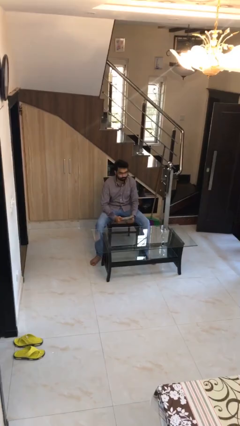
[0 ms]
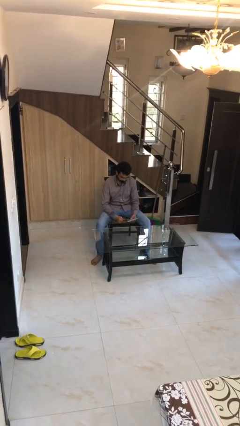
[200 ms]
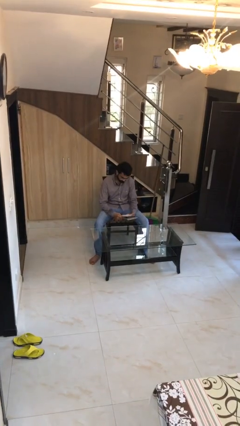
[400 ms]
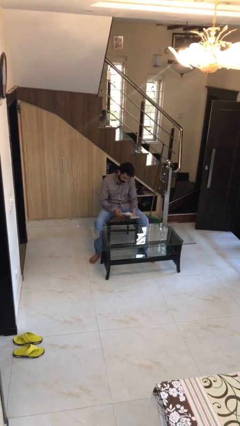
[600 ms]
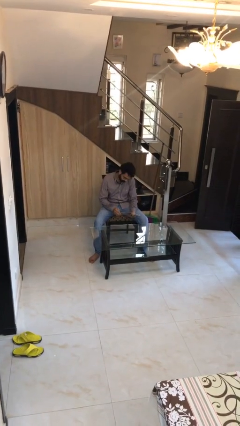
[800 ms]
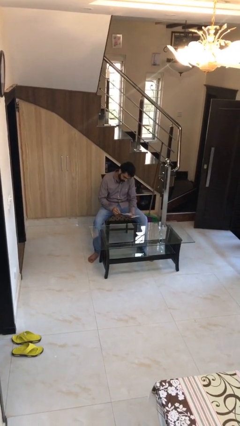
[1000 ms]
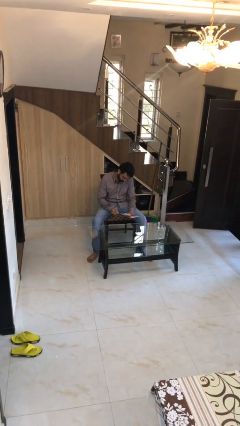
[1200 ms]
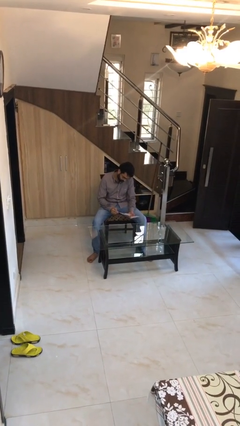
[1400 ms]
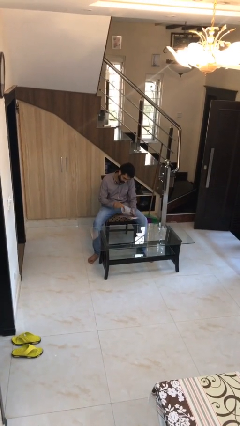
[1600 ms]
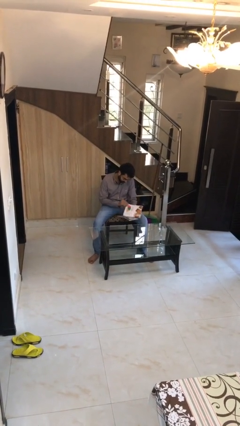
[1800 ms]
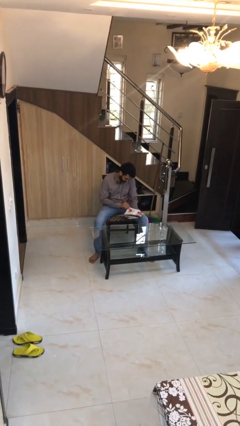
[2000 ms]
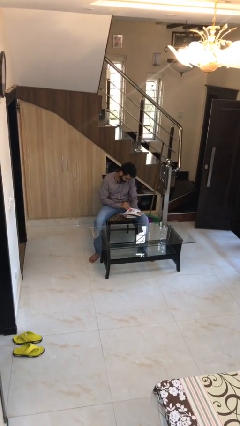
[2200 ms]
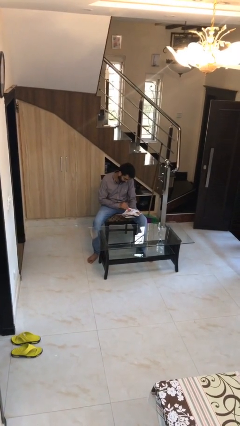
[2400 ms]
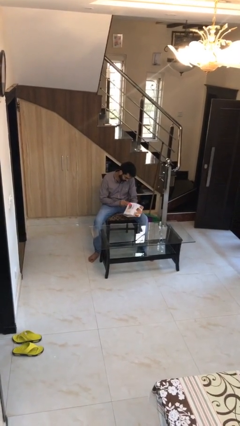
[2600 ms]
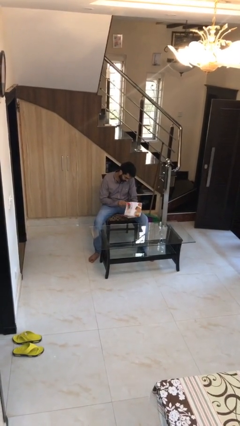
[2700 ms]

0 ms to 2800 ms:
person reads document

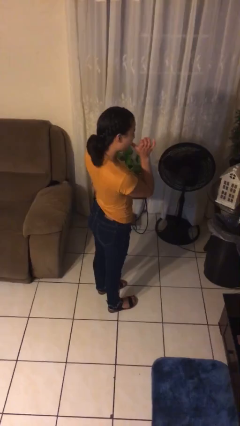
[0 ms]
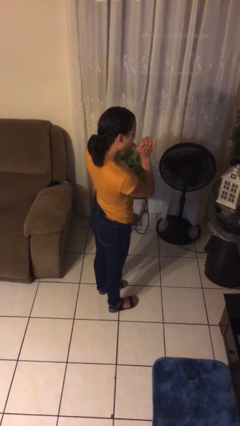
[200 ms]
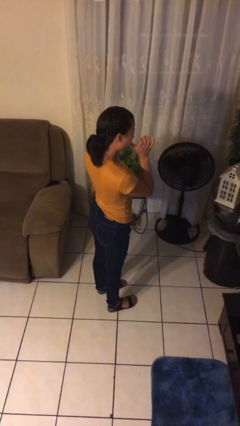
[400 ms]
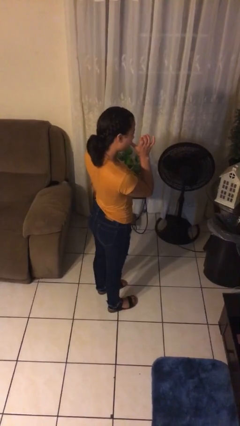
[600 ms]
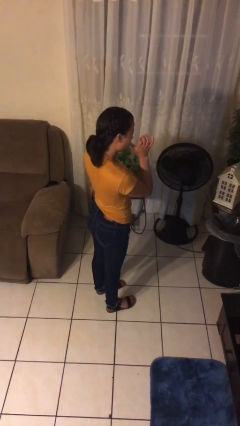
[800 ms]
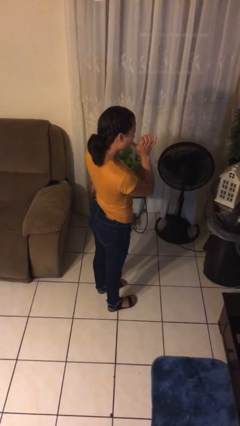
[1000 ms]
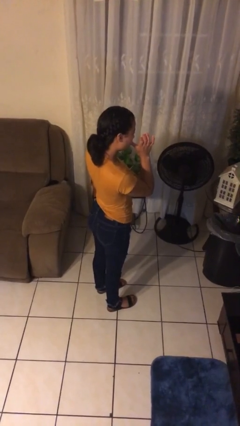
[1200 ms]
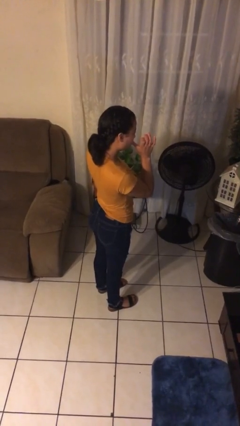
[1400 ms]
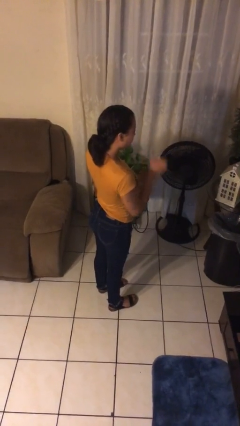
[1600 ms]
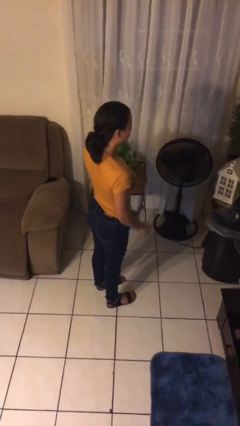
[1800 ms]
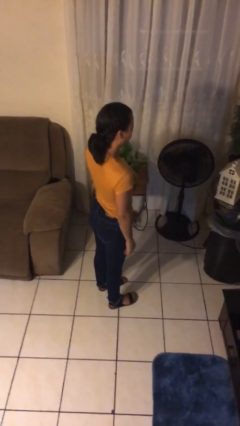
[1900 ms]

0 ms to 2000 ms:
person licks fingers

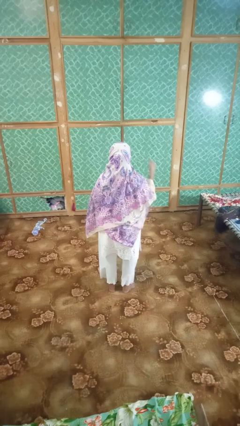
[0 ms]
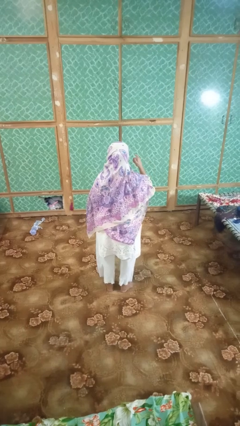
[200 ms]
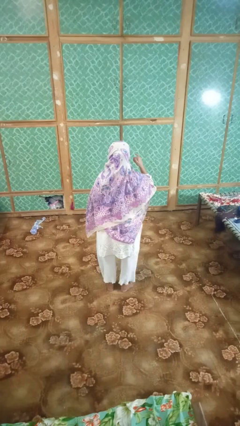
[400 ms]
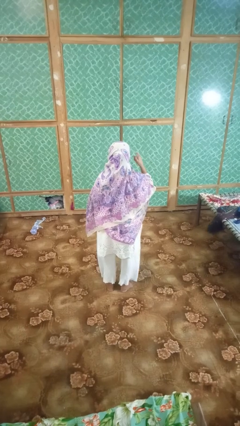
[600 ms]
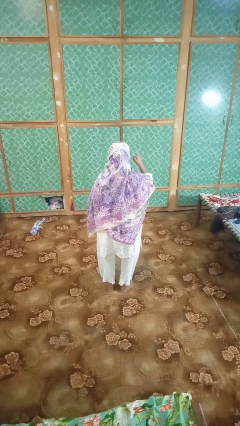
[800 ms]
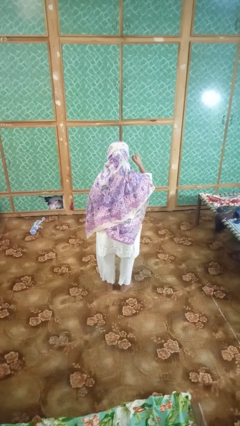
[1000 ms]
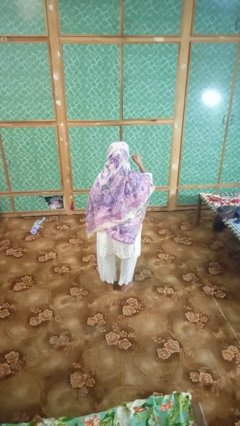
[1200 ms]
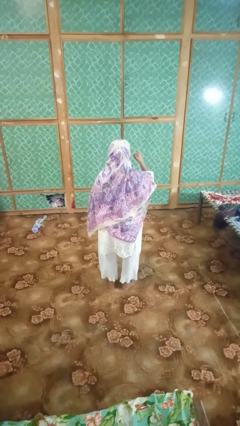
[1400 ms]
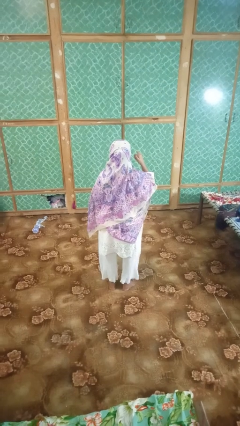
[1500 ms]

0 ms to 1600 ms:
person gestures call me

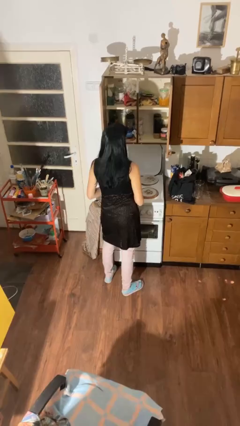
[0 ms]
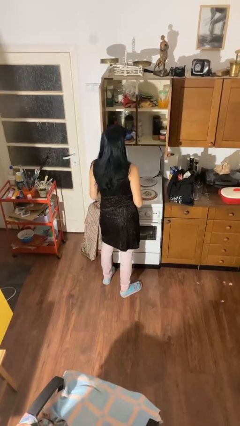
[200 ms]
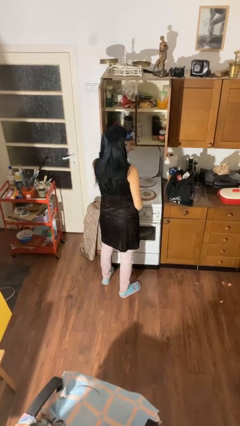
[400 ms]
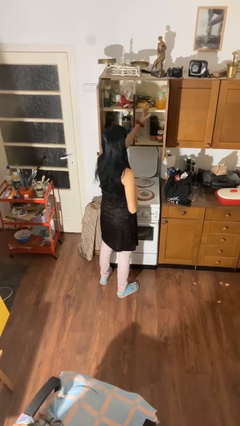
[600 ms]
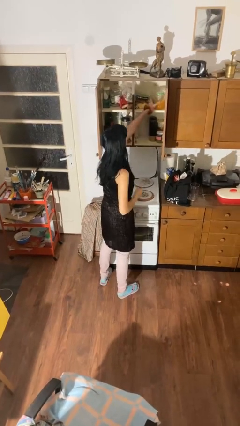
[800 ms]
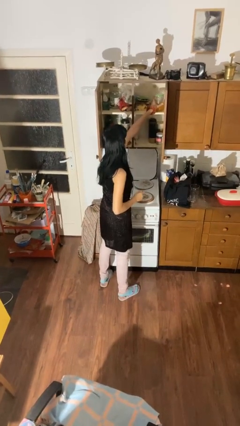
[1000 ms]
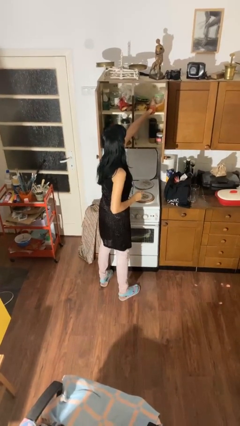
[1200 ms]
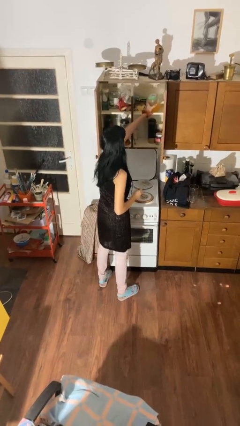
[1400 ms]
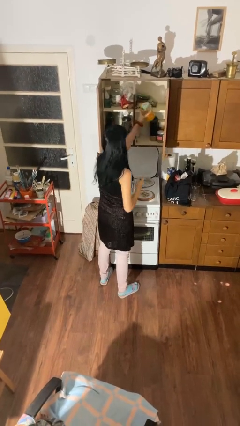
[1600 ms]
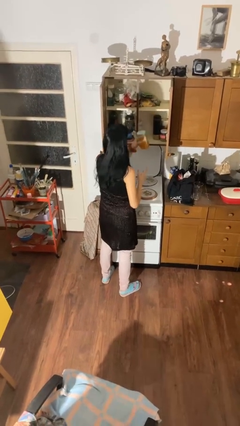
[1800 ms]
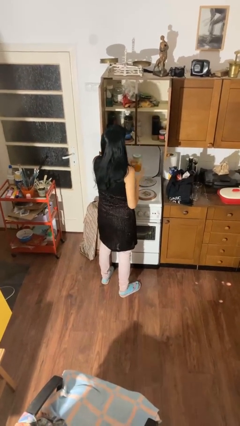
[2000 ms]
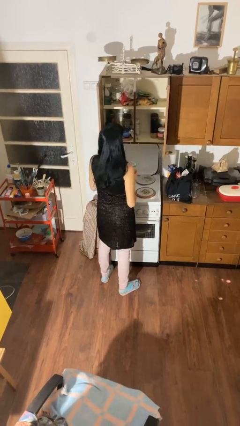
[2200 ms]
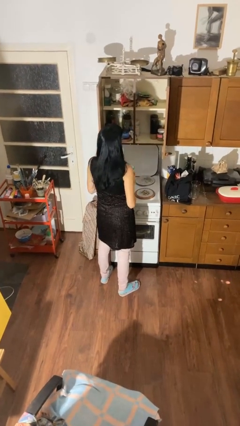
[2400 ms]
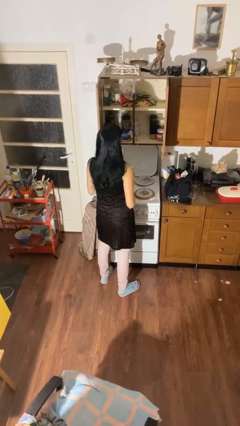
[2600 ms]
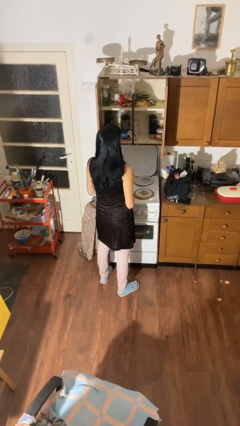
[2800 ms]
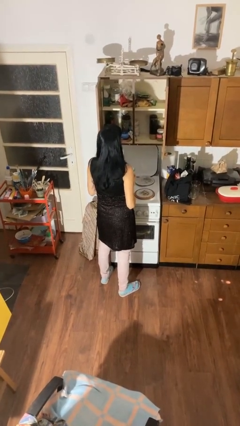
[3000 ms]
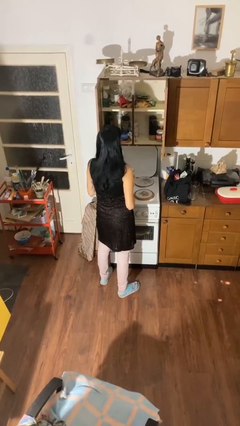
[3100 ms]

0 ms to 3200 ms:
person picks up object from cabinet

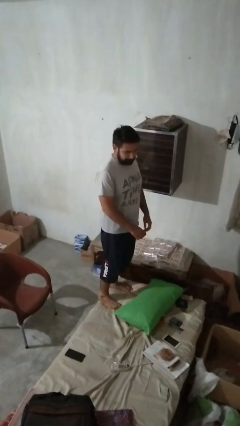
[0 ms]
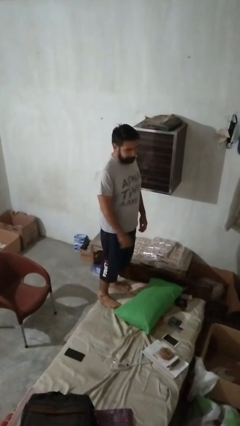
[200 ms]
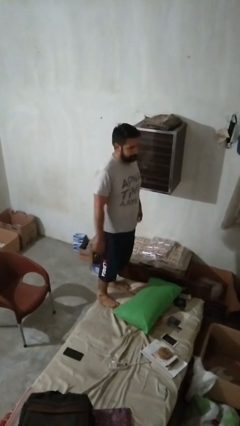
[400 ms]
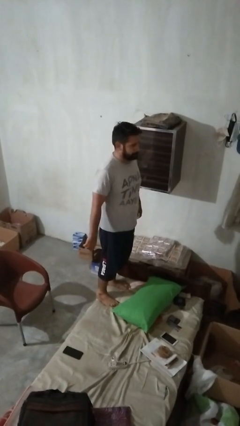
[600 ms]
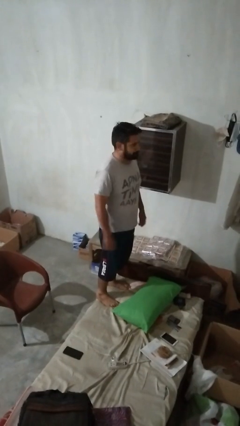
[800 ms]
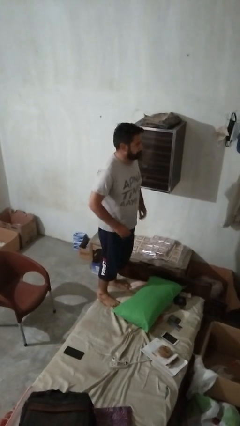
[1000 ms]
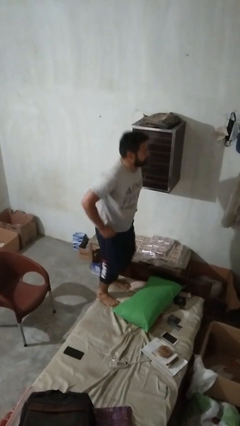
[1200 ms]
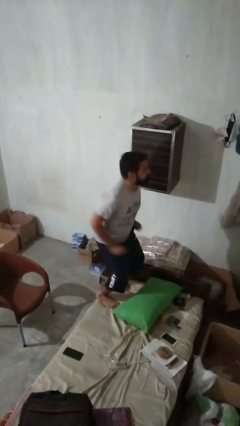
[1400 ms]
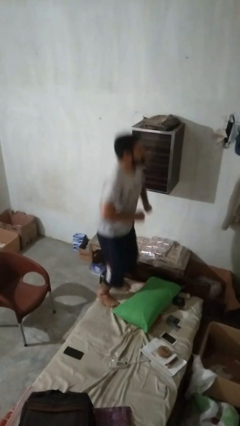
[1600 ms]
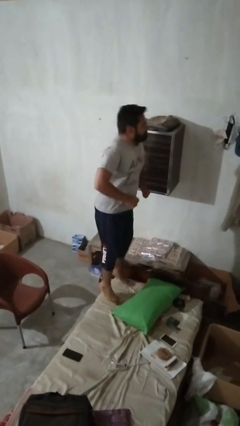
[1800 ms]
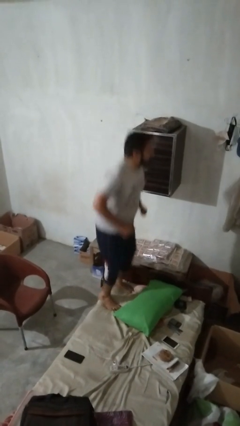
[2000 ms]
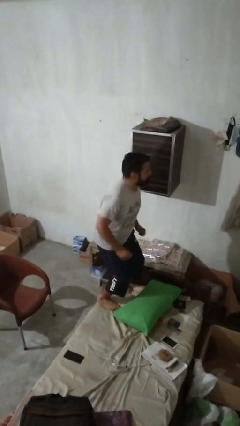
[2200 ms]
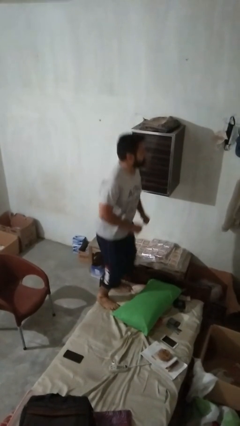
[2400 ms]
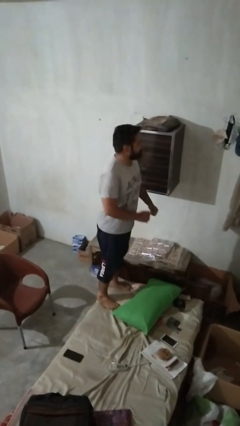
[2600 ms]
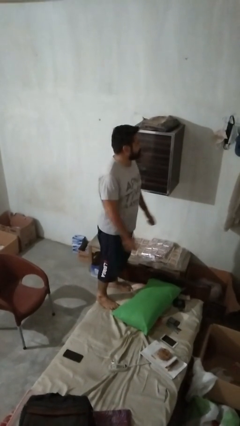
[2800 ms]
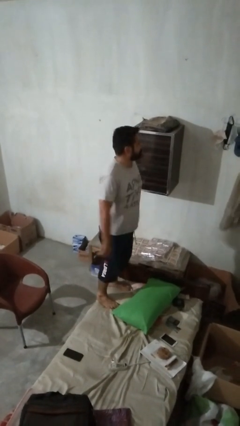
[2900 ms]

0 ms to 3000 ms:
person jumps on couch

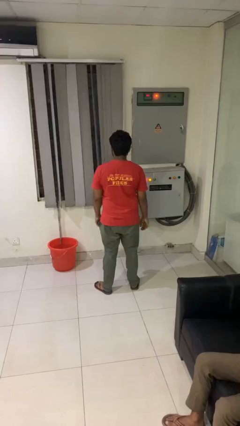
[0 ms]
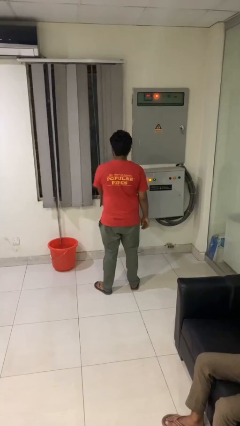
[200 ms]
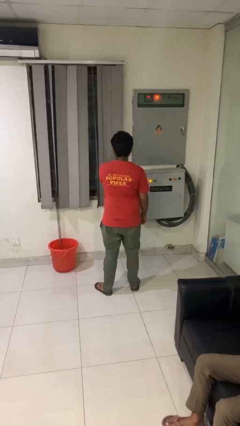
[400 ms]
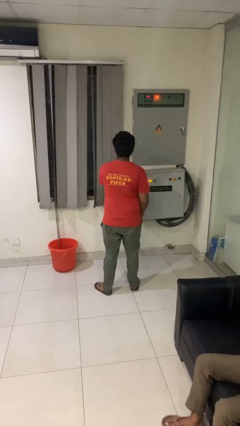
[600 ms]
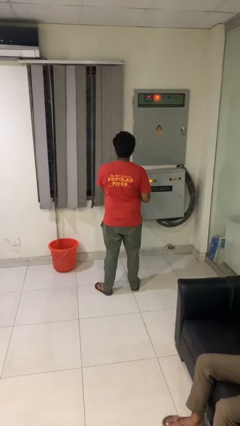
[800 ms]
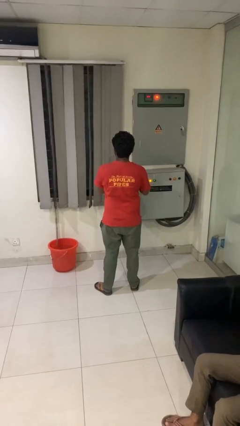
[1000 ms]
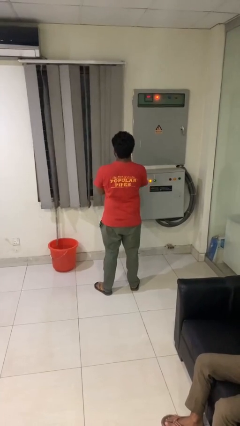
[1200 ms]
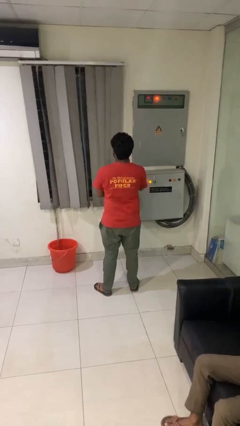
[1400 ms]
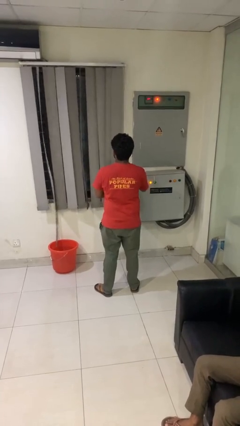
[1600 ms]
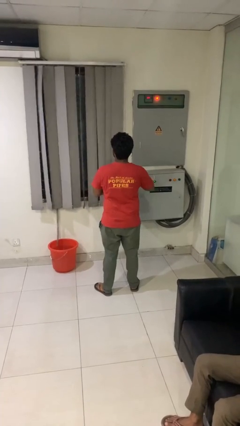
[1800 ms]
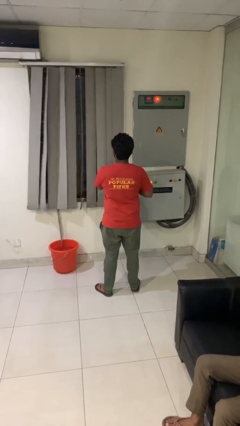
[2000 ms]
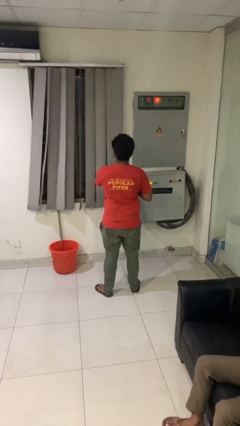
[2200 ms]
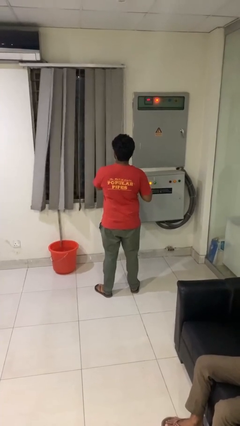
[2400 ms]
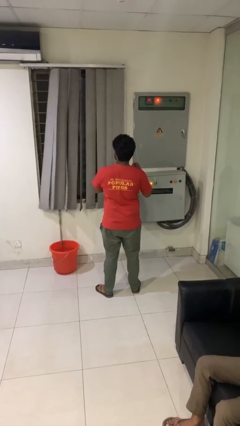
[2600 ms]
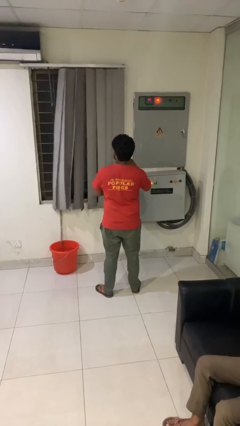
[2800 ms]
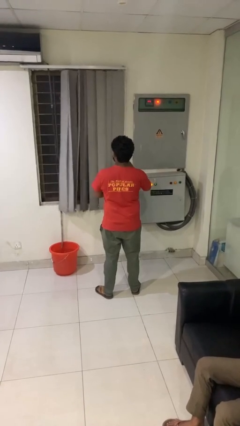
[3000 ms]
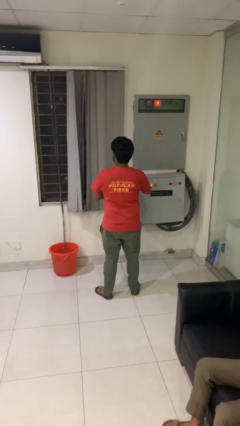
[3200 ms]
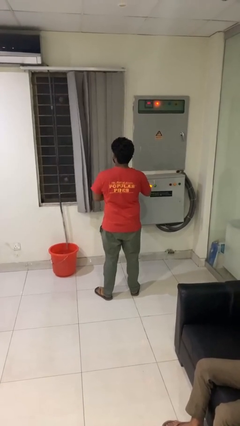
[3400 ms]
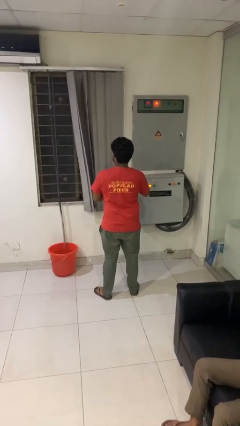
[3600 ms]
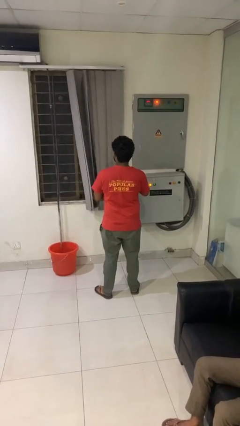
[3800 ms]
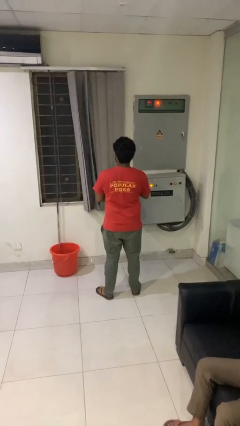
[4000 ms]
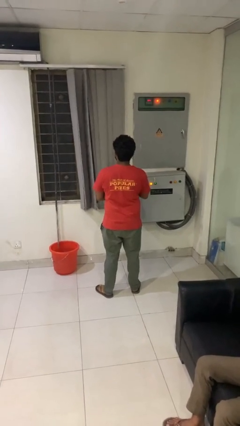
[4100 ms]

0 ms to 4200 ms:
person opens curtains

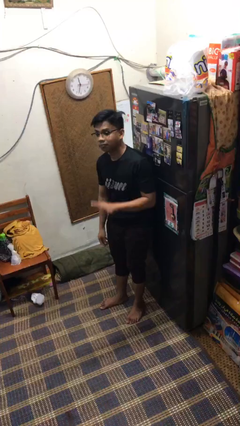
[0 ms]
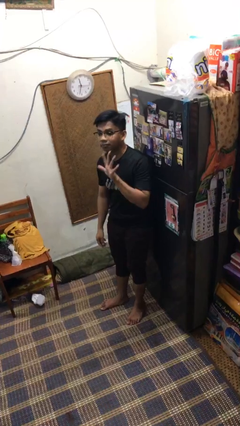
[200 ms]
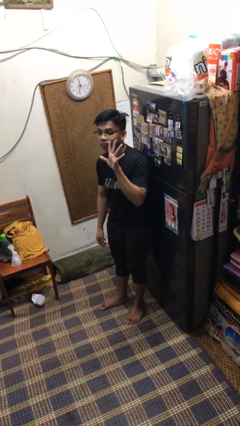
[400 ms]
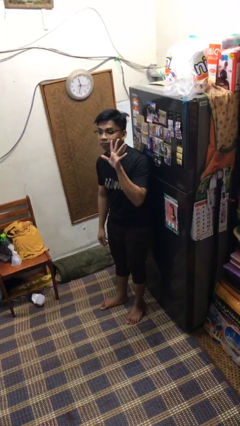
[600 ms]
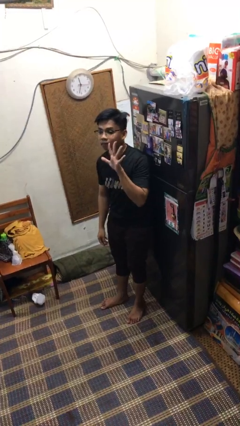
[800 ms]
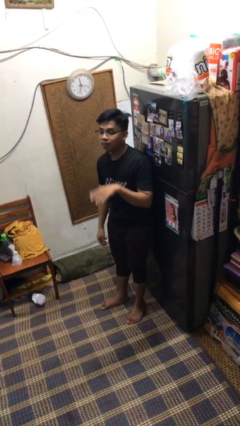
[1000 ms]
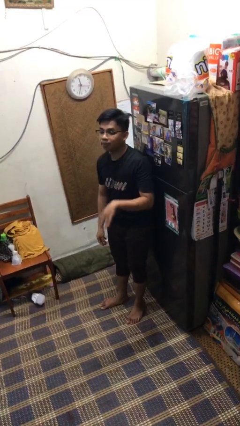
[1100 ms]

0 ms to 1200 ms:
person gestures number five
